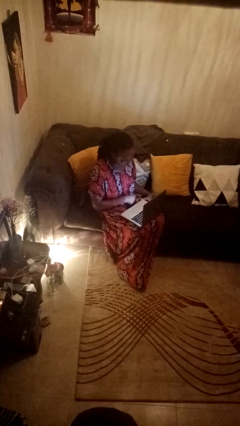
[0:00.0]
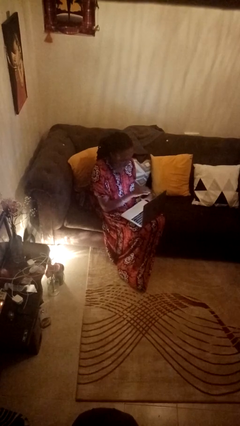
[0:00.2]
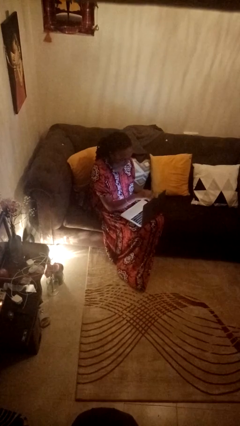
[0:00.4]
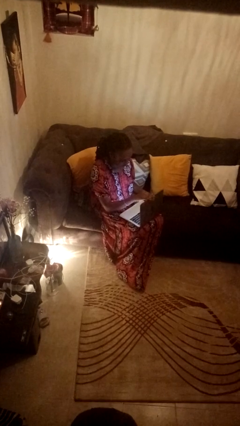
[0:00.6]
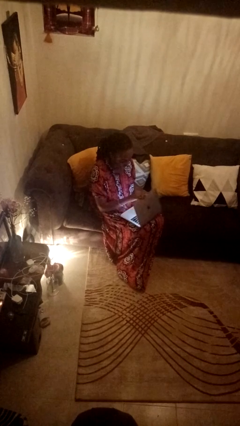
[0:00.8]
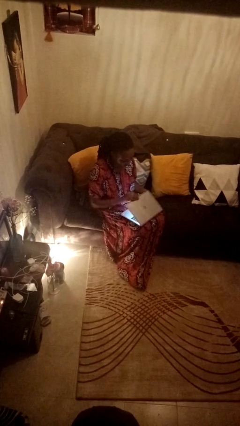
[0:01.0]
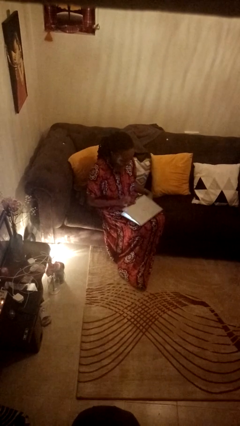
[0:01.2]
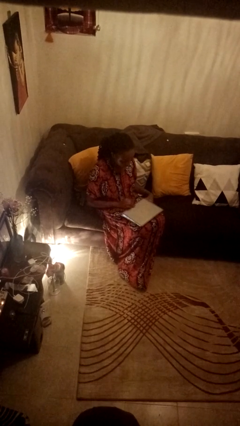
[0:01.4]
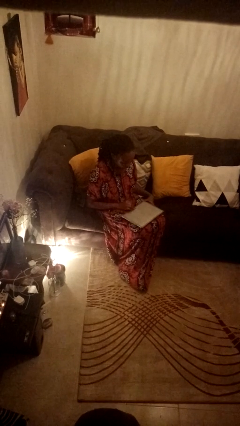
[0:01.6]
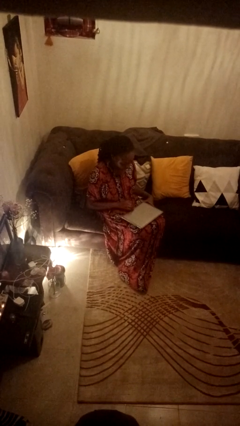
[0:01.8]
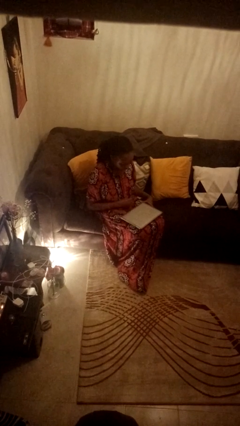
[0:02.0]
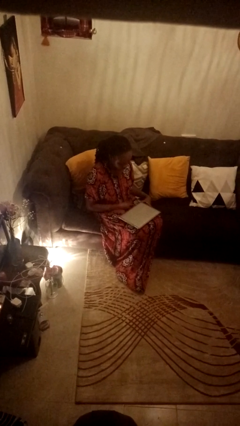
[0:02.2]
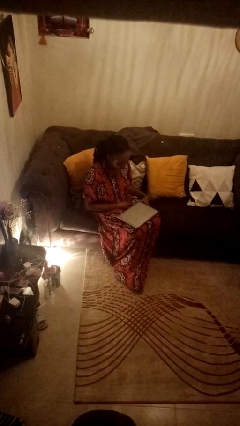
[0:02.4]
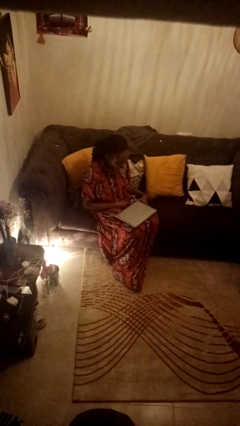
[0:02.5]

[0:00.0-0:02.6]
person closes laptop

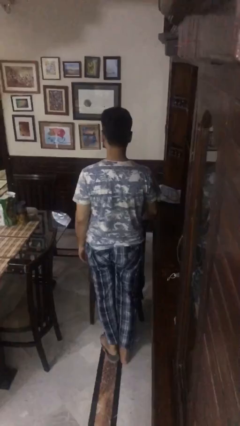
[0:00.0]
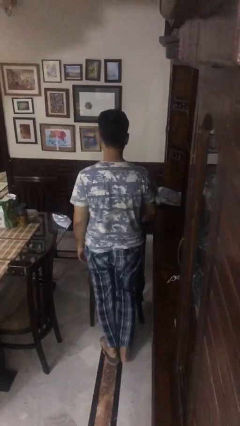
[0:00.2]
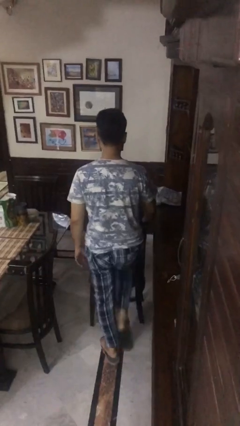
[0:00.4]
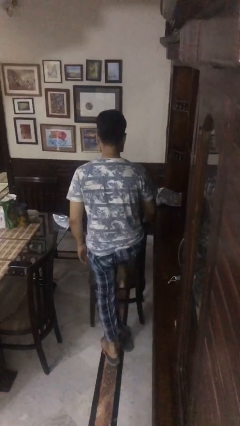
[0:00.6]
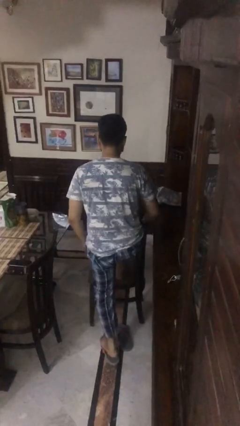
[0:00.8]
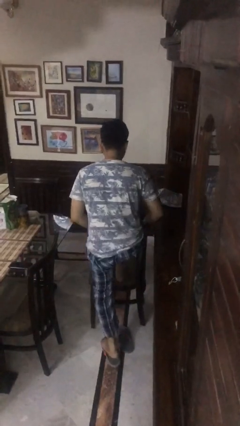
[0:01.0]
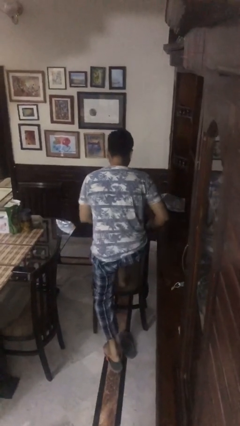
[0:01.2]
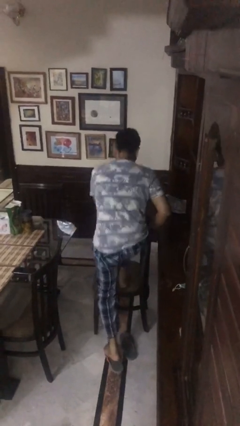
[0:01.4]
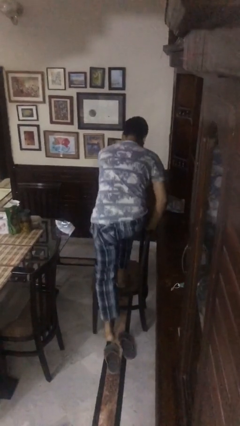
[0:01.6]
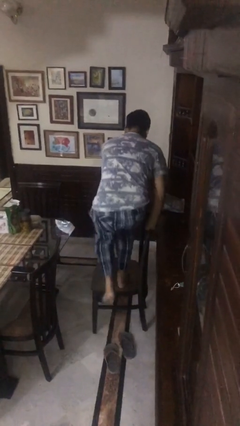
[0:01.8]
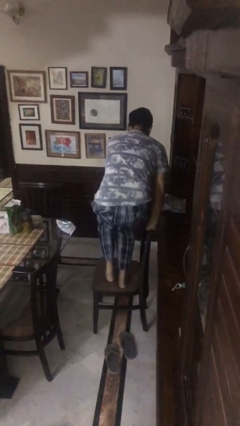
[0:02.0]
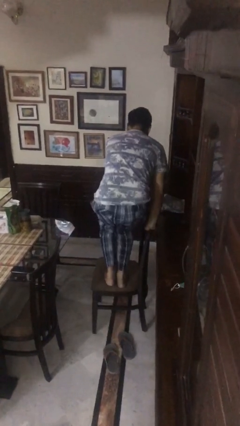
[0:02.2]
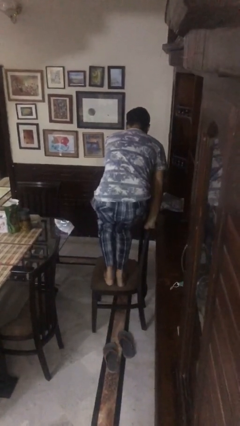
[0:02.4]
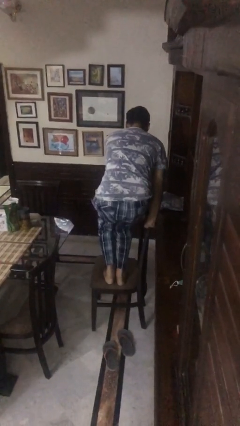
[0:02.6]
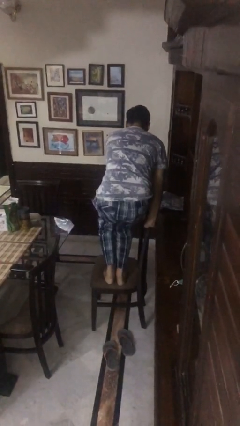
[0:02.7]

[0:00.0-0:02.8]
person climbs on chair

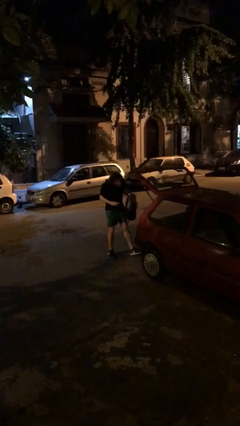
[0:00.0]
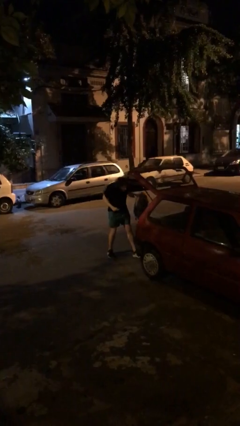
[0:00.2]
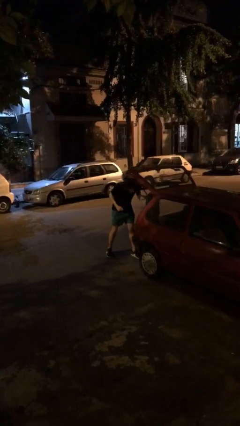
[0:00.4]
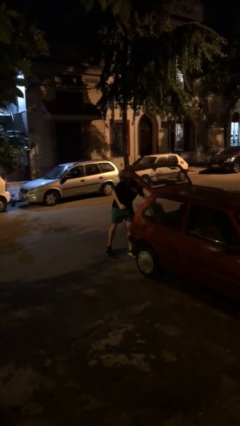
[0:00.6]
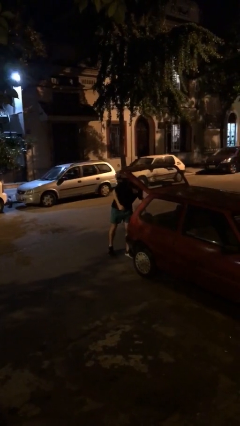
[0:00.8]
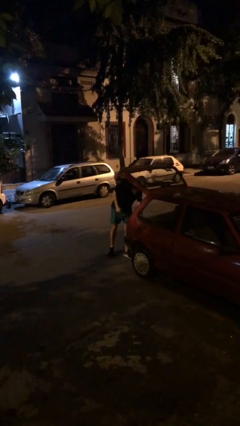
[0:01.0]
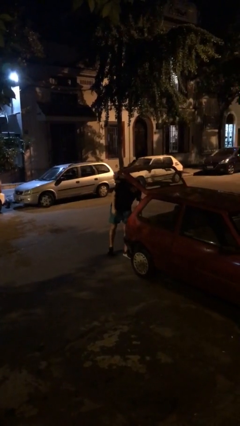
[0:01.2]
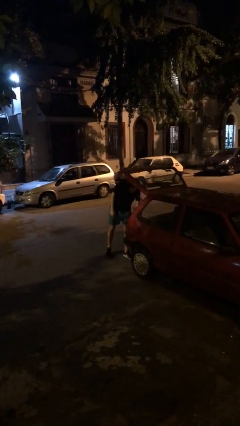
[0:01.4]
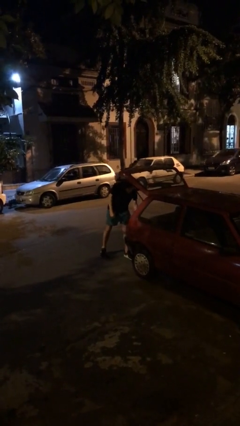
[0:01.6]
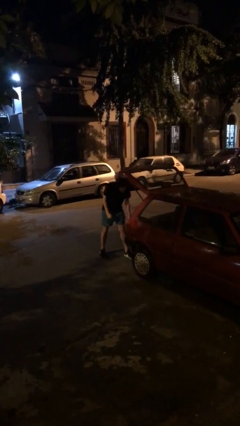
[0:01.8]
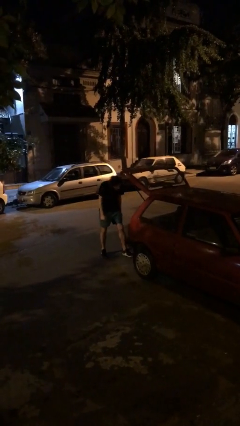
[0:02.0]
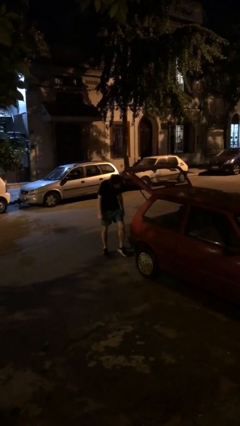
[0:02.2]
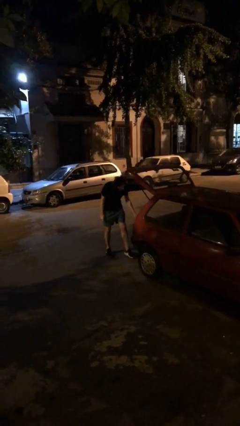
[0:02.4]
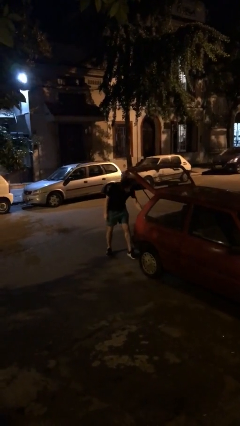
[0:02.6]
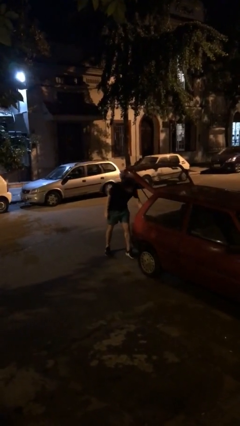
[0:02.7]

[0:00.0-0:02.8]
person loads car

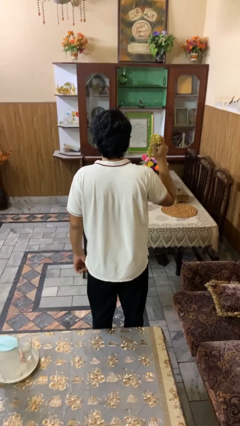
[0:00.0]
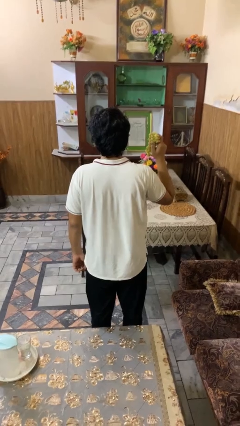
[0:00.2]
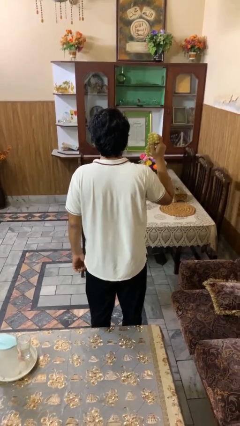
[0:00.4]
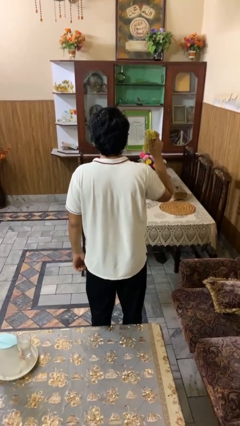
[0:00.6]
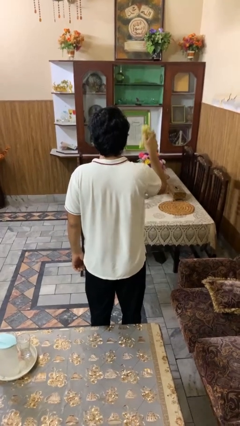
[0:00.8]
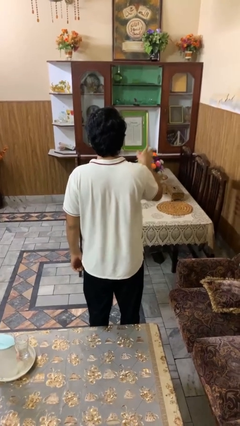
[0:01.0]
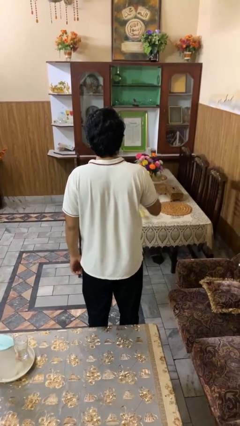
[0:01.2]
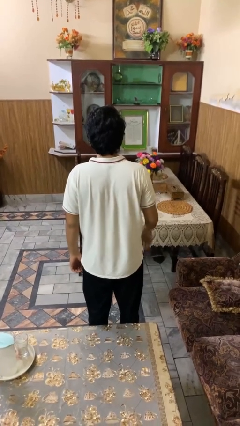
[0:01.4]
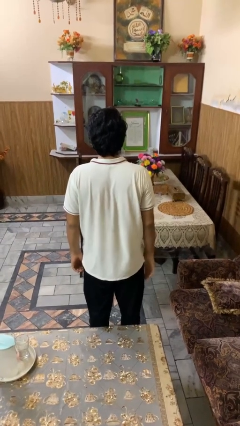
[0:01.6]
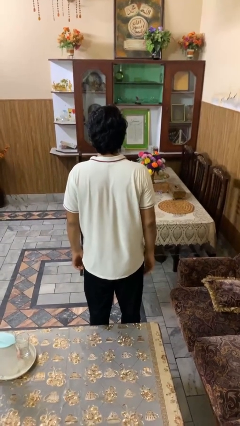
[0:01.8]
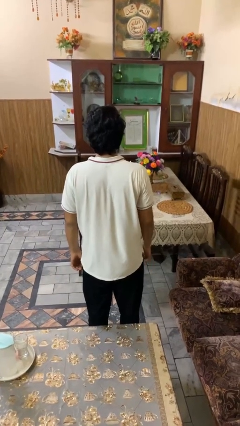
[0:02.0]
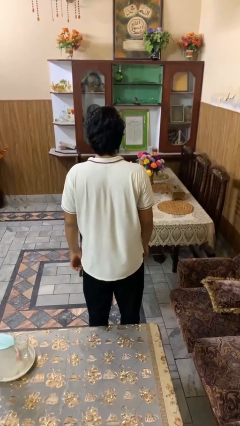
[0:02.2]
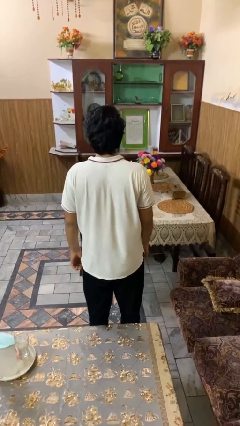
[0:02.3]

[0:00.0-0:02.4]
person throws object on table

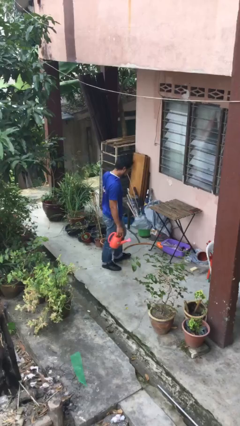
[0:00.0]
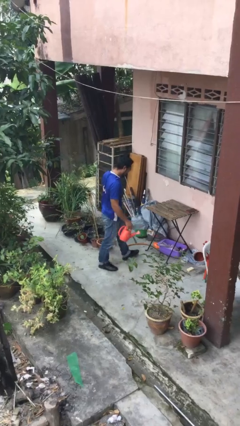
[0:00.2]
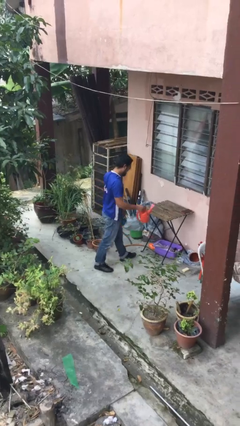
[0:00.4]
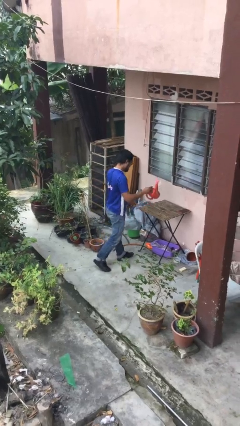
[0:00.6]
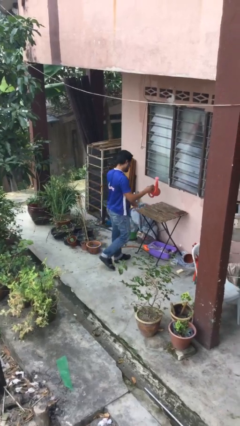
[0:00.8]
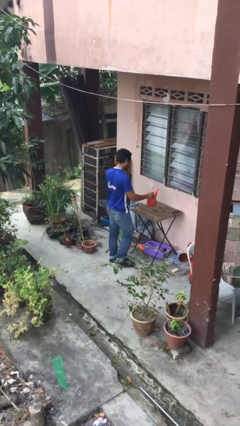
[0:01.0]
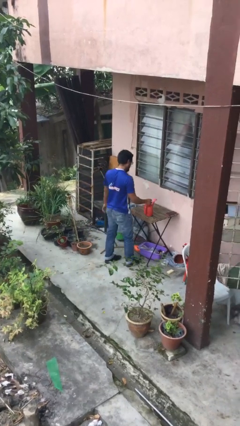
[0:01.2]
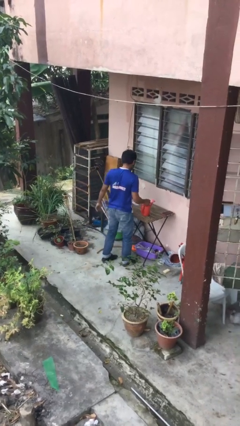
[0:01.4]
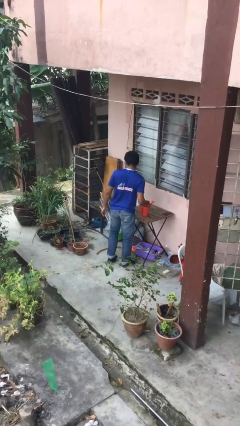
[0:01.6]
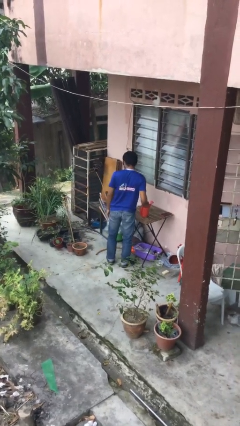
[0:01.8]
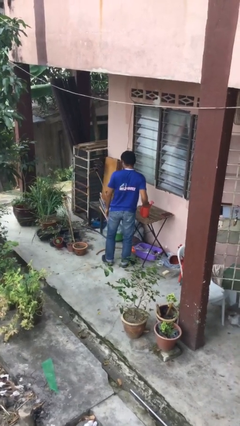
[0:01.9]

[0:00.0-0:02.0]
person puts down object on table

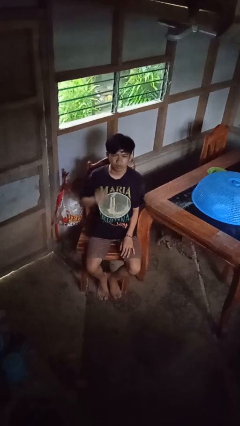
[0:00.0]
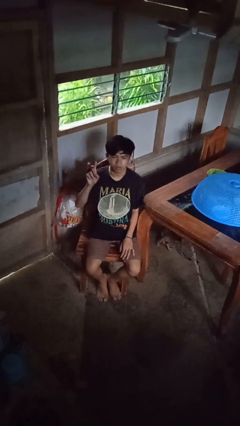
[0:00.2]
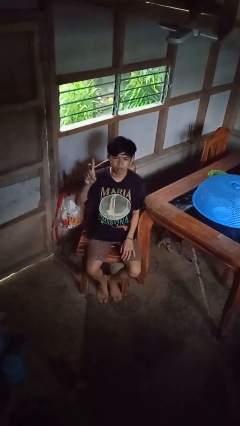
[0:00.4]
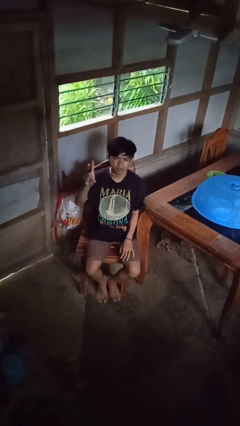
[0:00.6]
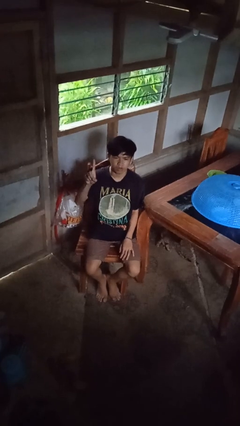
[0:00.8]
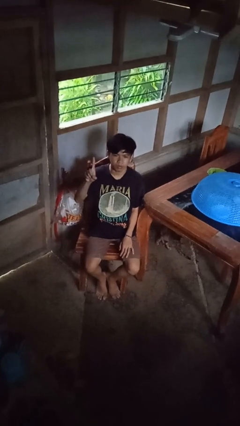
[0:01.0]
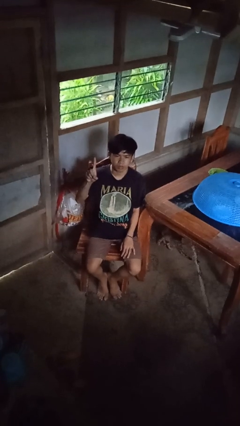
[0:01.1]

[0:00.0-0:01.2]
person gestures number one

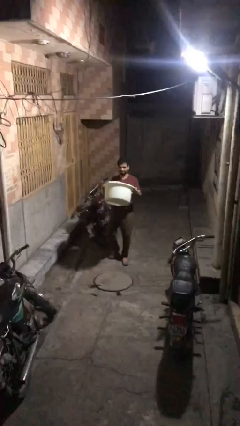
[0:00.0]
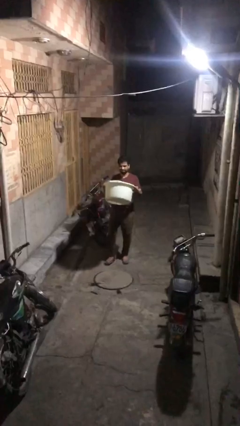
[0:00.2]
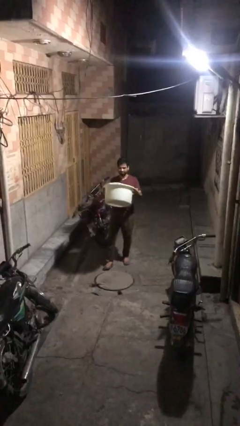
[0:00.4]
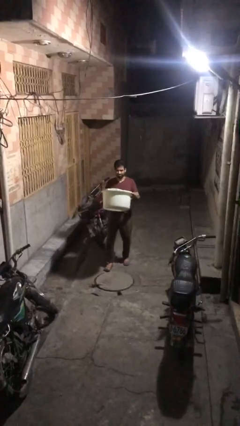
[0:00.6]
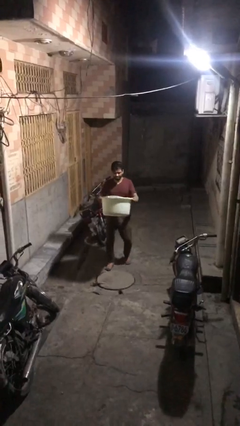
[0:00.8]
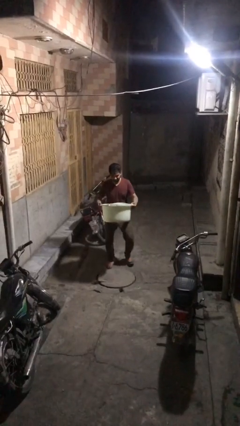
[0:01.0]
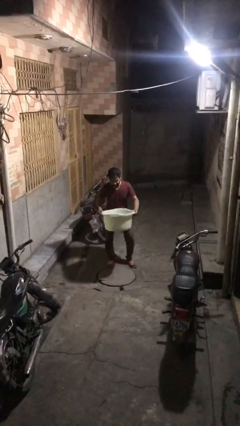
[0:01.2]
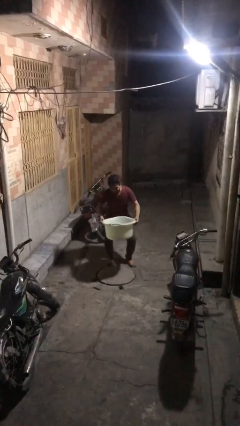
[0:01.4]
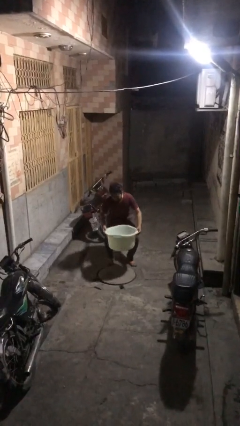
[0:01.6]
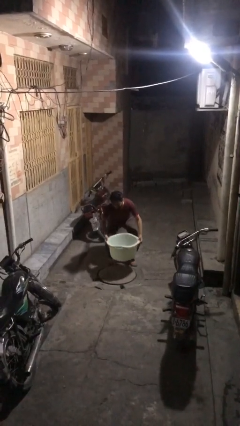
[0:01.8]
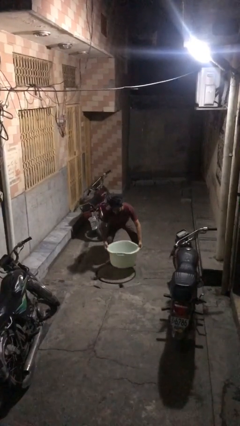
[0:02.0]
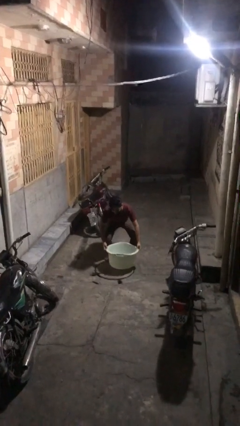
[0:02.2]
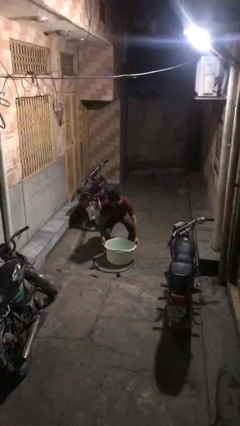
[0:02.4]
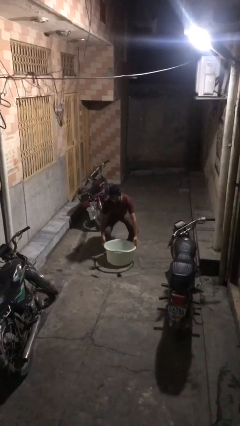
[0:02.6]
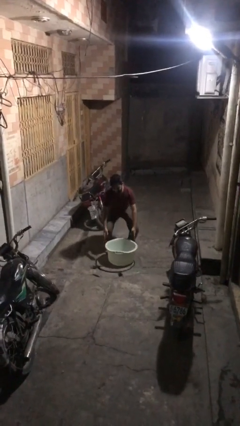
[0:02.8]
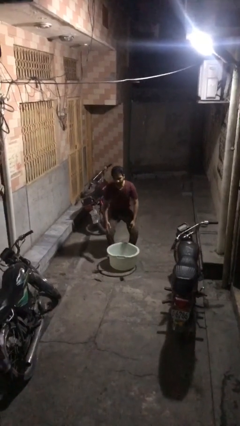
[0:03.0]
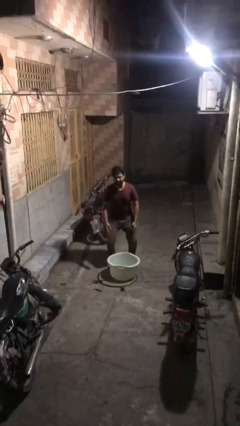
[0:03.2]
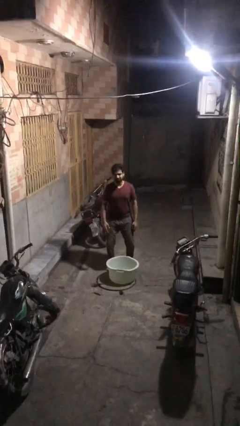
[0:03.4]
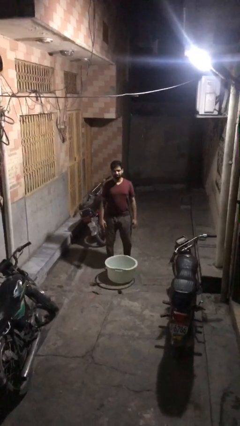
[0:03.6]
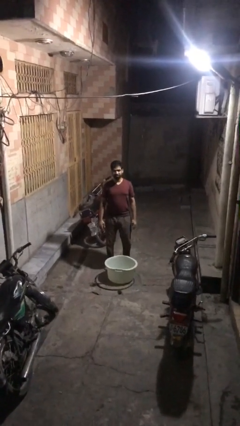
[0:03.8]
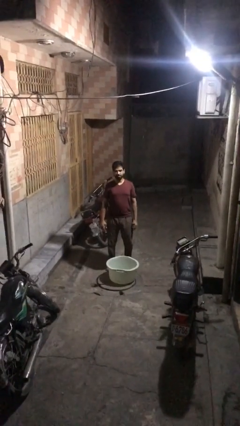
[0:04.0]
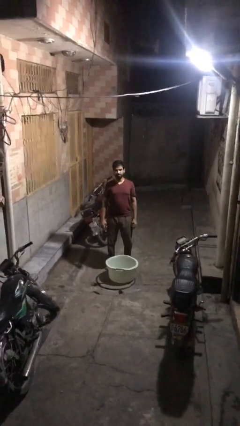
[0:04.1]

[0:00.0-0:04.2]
person puts down object on floor
